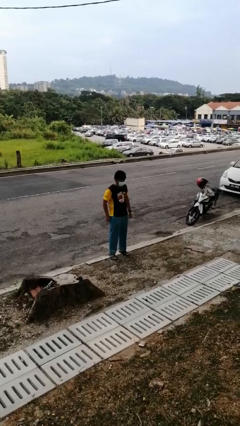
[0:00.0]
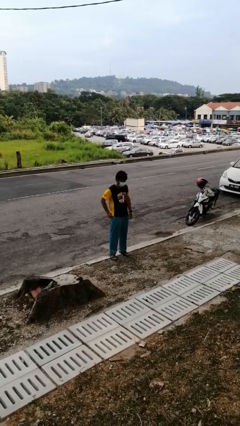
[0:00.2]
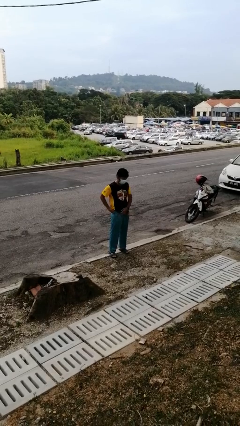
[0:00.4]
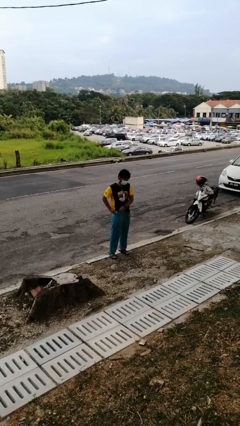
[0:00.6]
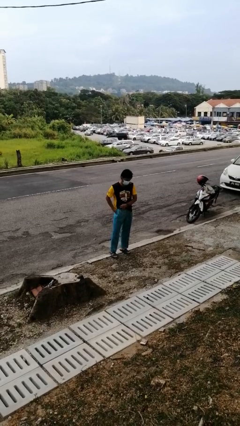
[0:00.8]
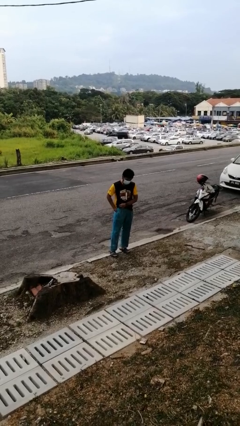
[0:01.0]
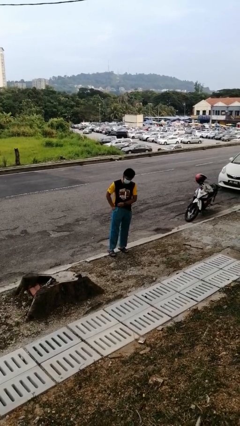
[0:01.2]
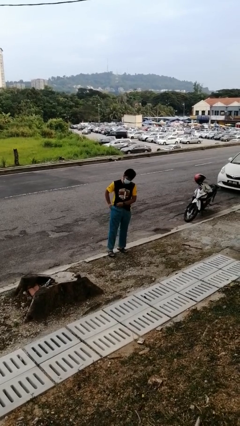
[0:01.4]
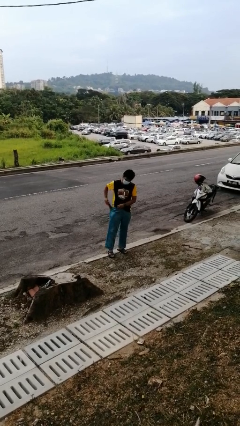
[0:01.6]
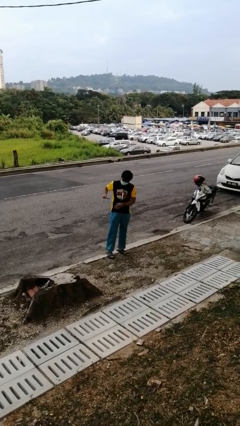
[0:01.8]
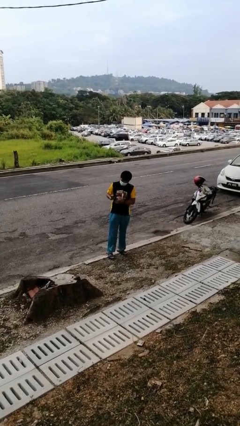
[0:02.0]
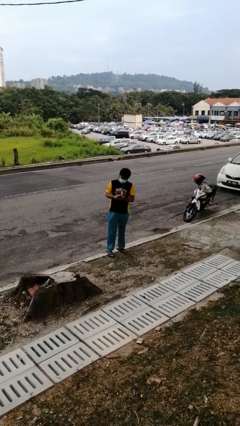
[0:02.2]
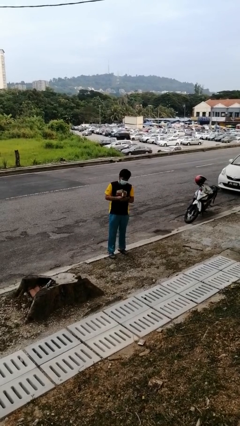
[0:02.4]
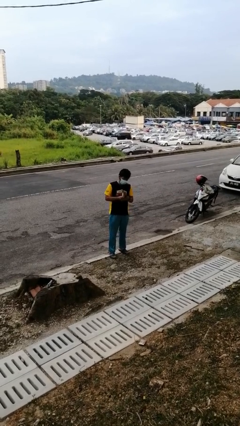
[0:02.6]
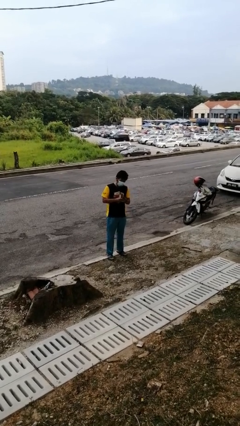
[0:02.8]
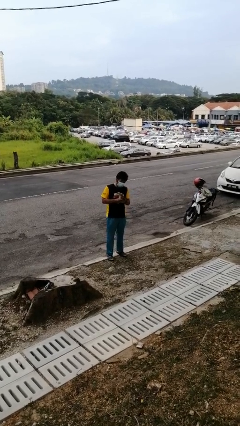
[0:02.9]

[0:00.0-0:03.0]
person takes phone from pocket

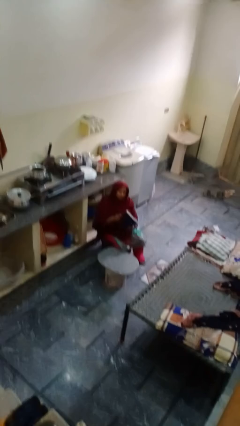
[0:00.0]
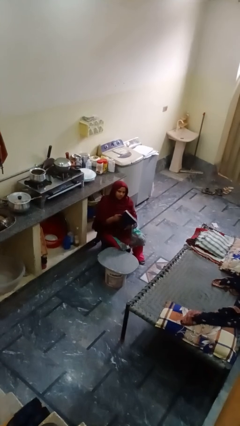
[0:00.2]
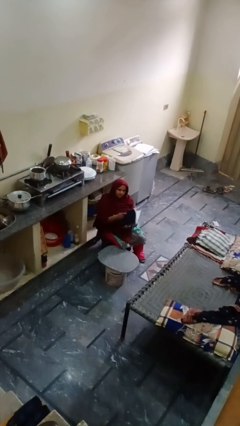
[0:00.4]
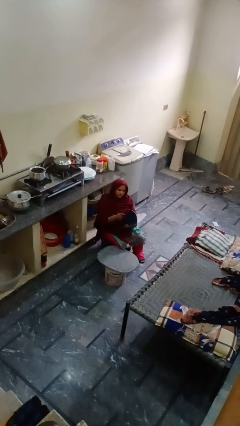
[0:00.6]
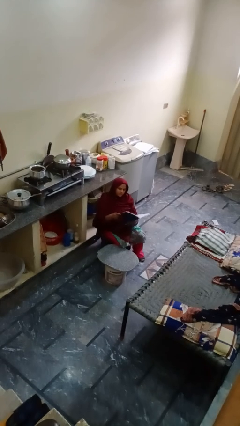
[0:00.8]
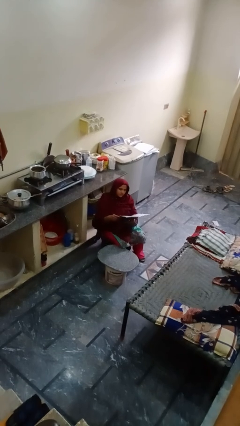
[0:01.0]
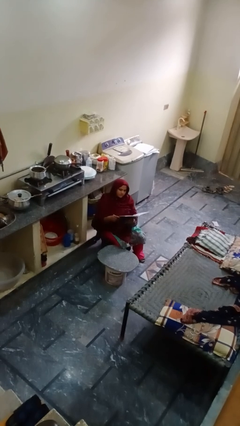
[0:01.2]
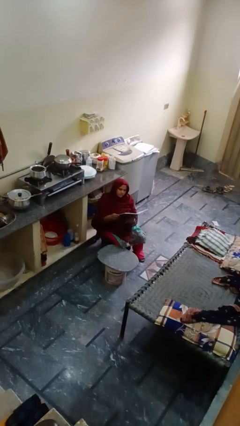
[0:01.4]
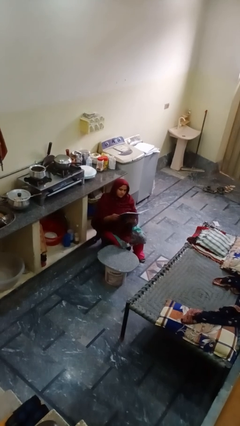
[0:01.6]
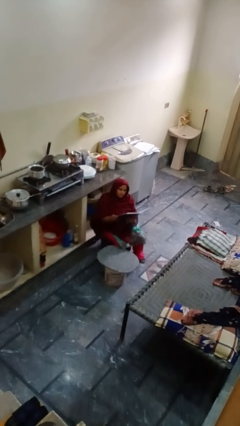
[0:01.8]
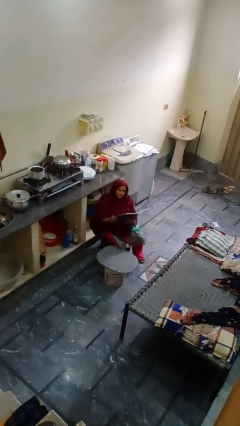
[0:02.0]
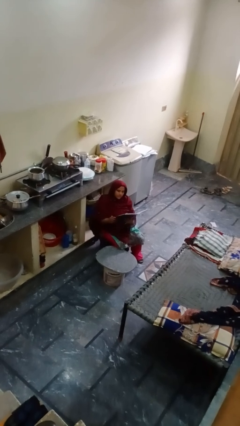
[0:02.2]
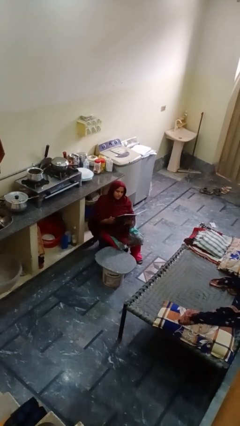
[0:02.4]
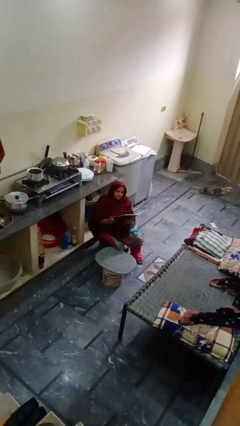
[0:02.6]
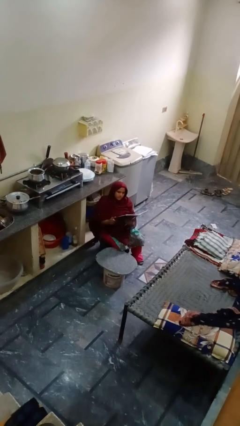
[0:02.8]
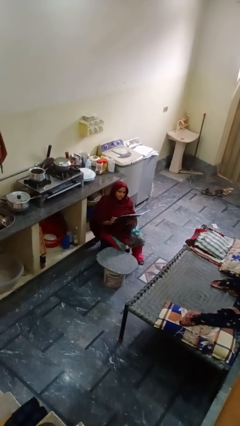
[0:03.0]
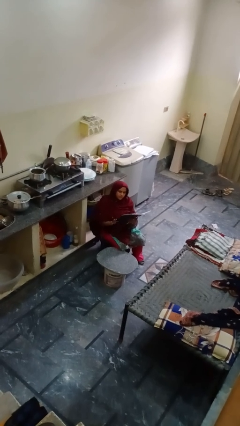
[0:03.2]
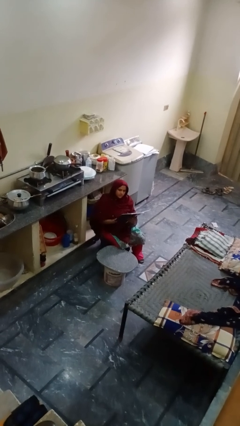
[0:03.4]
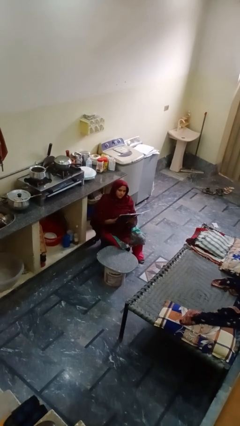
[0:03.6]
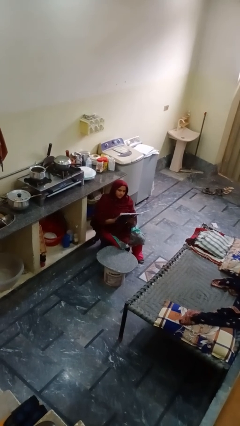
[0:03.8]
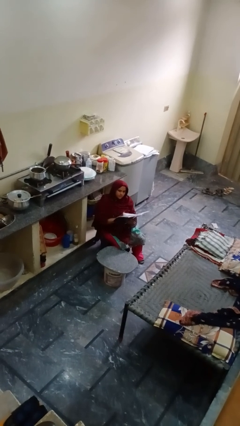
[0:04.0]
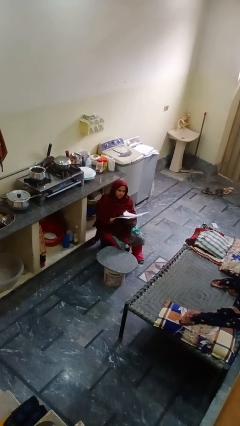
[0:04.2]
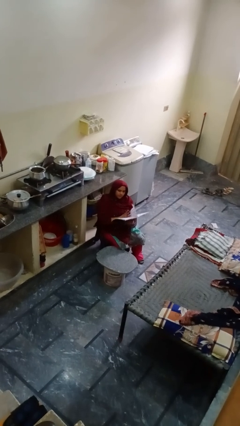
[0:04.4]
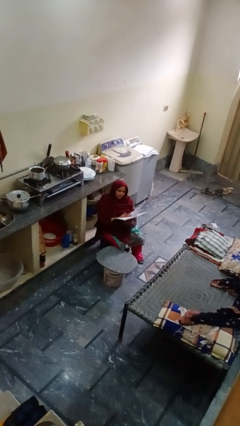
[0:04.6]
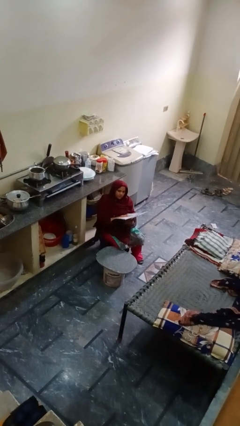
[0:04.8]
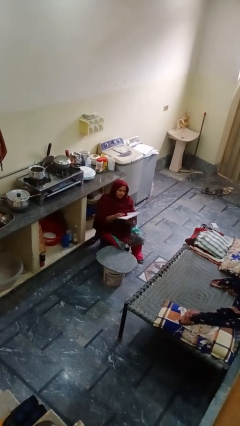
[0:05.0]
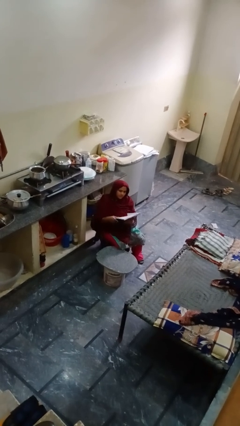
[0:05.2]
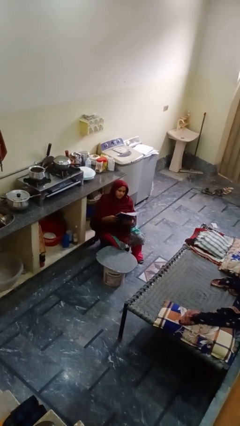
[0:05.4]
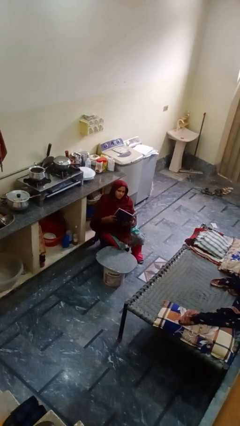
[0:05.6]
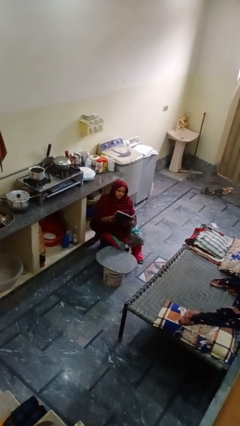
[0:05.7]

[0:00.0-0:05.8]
person reads magazine

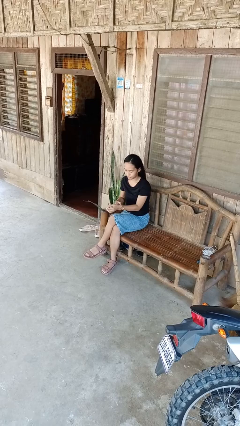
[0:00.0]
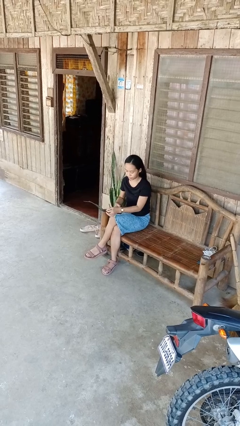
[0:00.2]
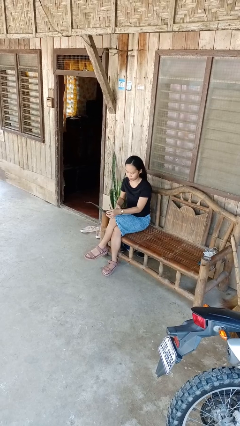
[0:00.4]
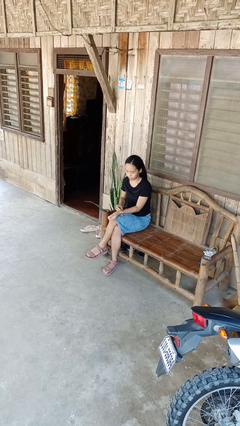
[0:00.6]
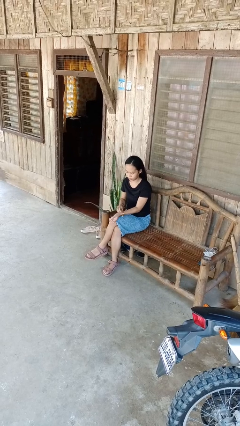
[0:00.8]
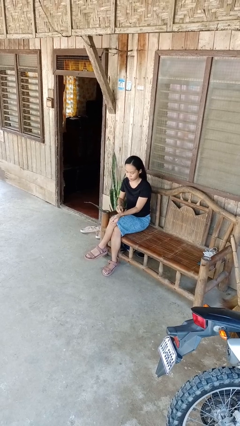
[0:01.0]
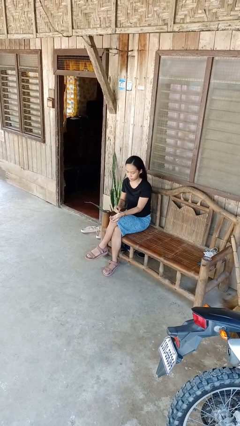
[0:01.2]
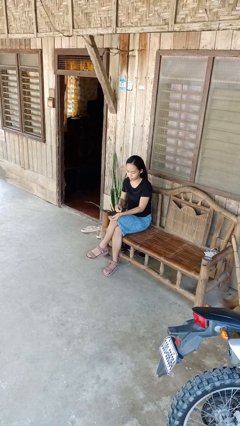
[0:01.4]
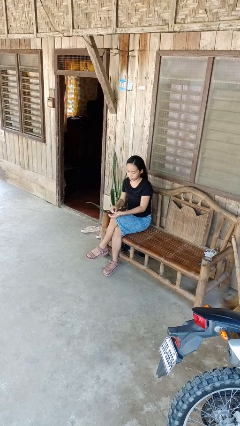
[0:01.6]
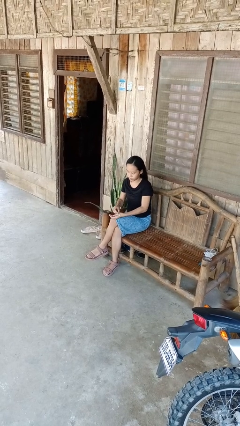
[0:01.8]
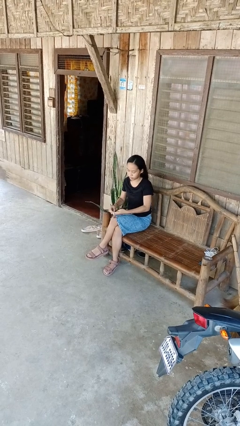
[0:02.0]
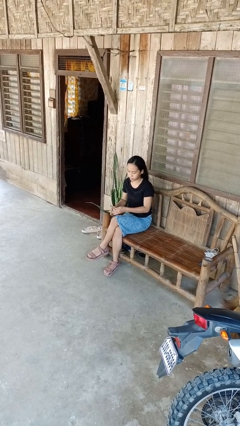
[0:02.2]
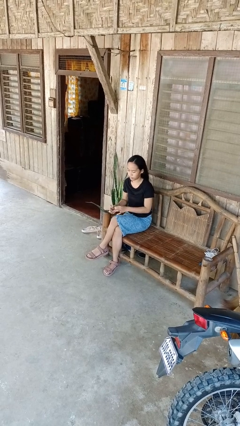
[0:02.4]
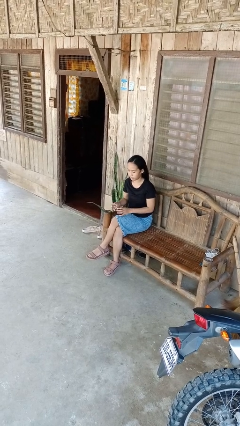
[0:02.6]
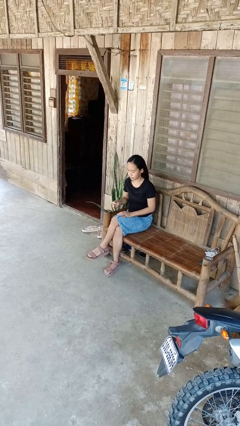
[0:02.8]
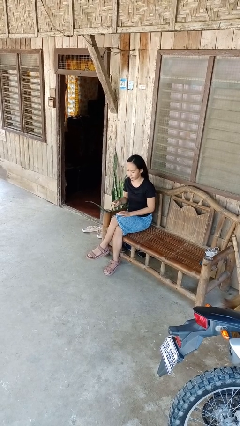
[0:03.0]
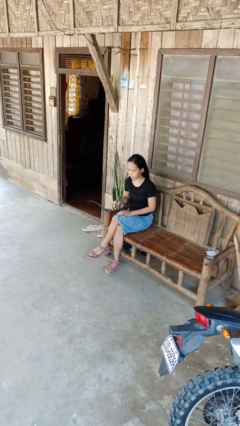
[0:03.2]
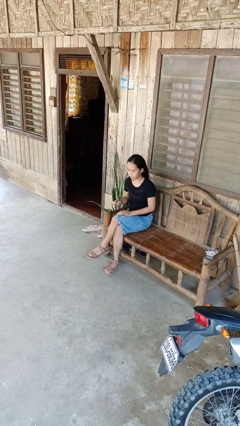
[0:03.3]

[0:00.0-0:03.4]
person takes off wristwatch

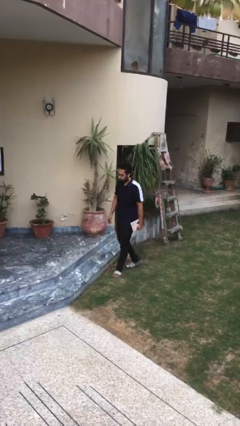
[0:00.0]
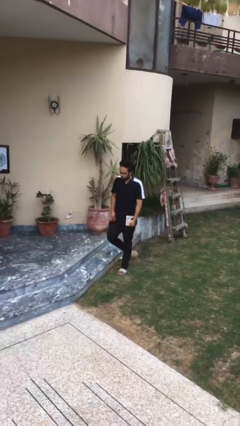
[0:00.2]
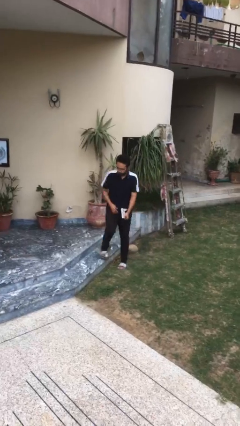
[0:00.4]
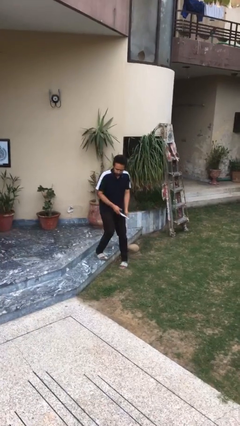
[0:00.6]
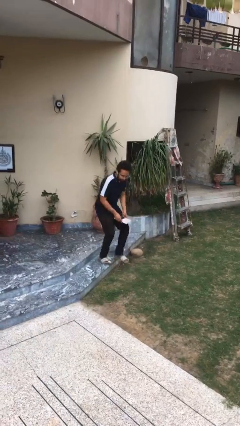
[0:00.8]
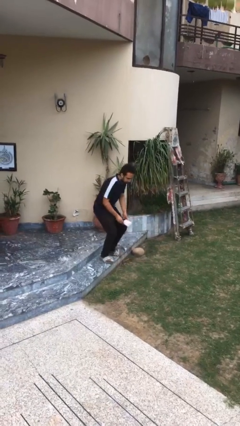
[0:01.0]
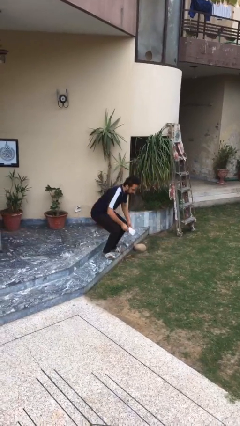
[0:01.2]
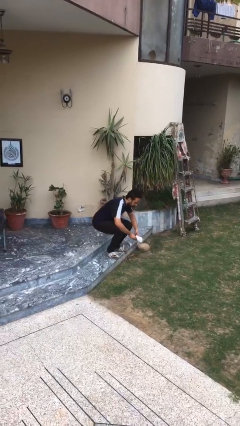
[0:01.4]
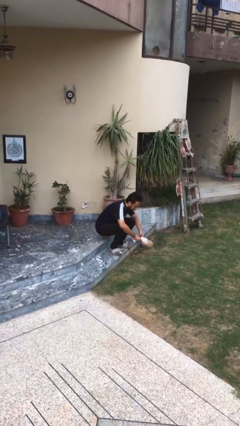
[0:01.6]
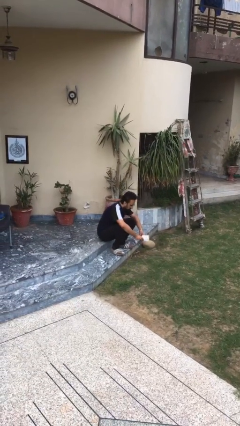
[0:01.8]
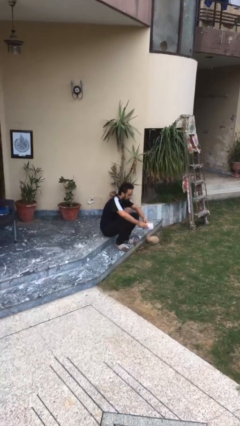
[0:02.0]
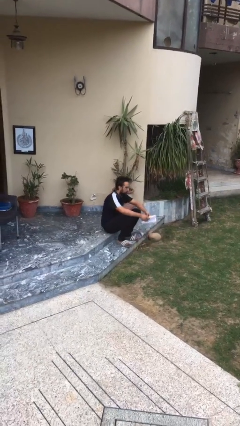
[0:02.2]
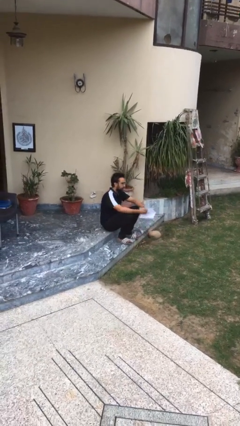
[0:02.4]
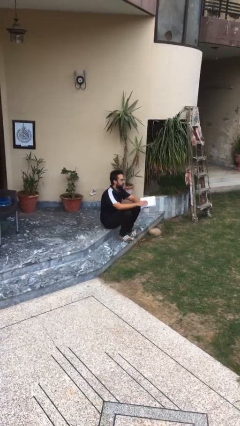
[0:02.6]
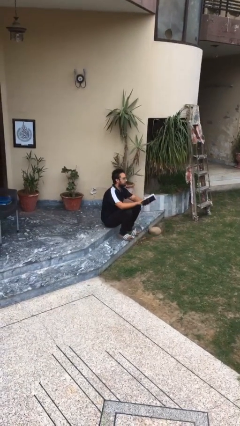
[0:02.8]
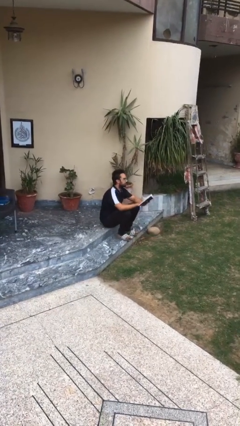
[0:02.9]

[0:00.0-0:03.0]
person sits down

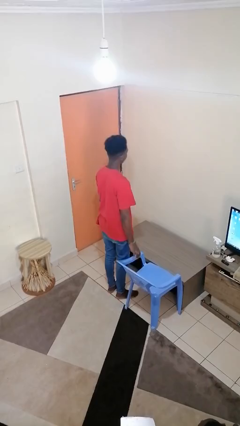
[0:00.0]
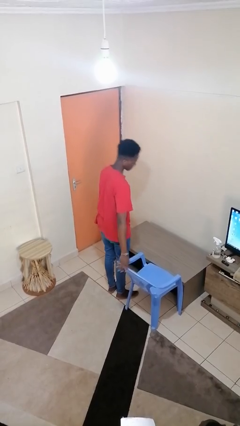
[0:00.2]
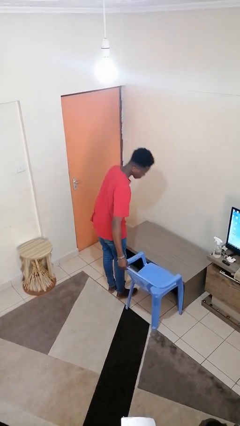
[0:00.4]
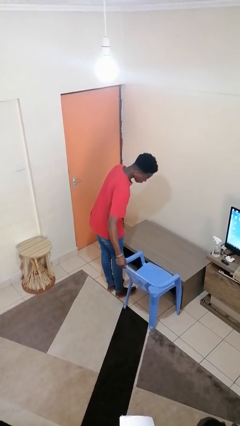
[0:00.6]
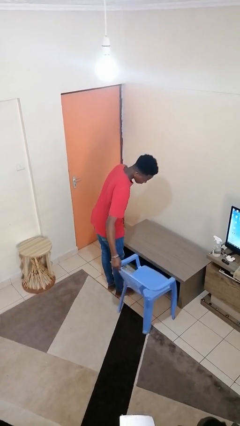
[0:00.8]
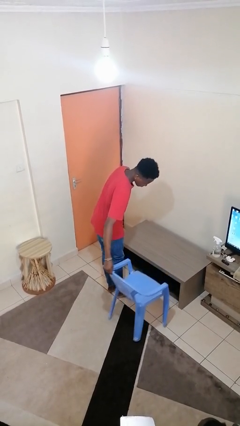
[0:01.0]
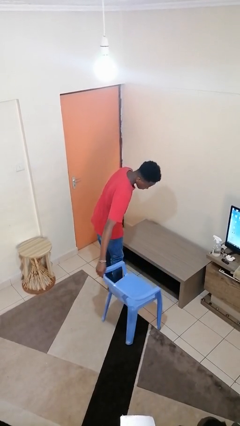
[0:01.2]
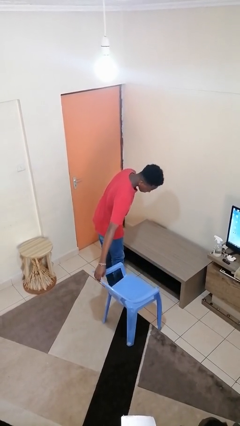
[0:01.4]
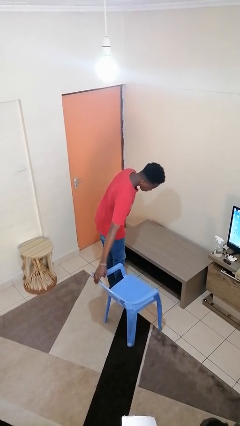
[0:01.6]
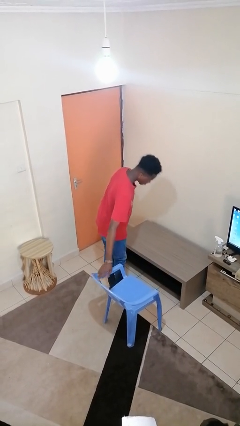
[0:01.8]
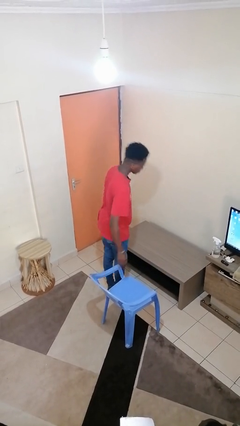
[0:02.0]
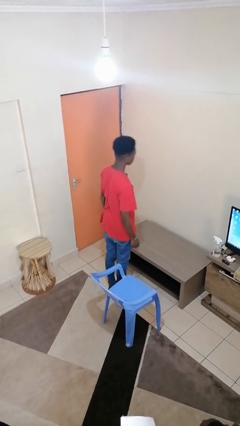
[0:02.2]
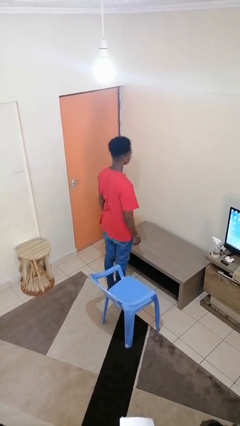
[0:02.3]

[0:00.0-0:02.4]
person pulls out chair
